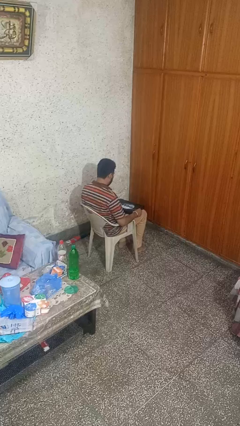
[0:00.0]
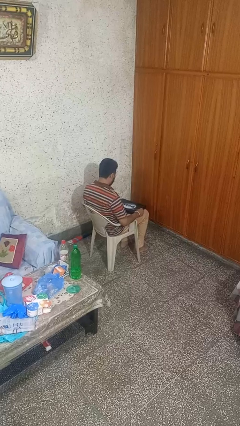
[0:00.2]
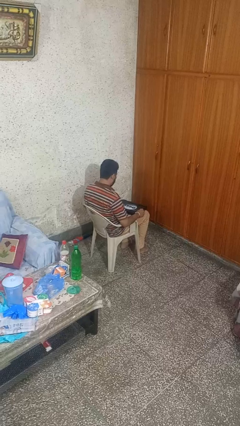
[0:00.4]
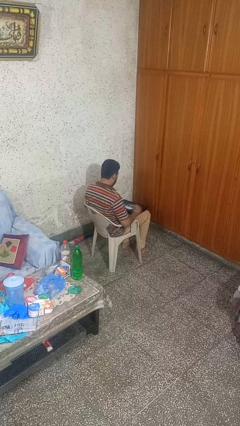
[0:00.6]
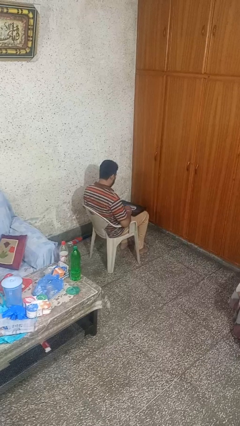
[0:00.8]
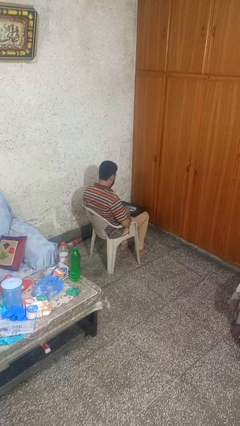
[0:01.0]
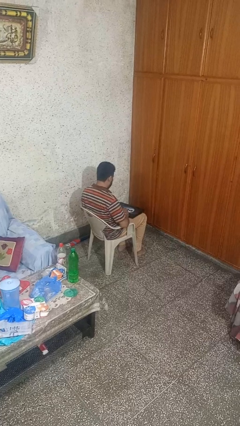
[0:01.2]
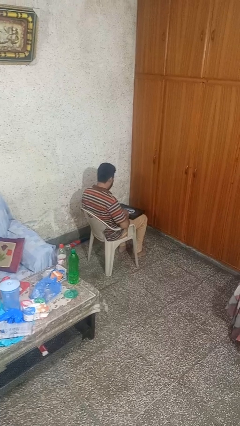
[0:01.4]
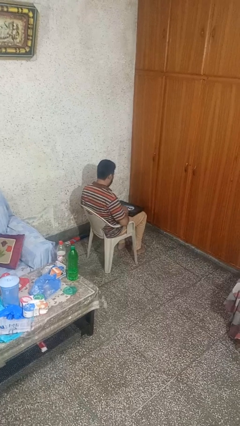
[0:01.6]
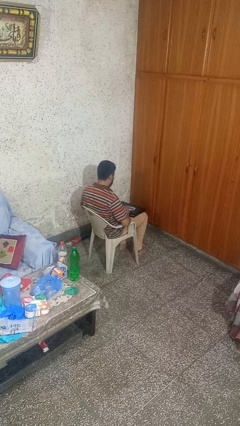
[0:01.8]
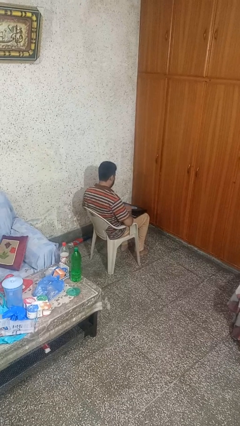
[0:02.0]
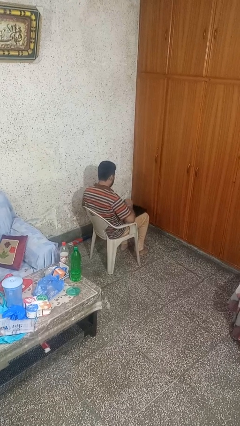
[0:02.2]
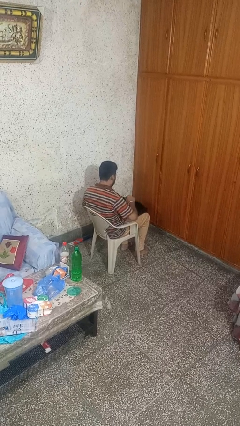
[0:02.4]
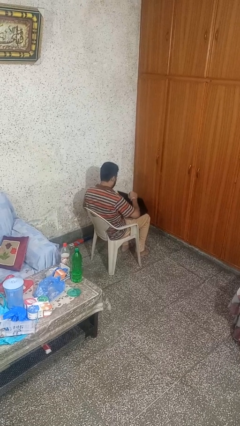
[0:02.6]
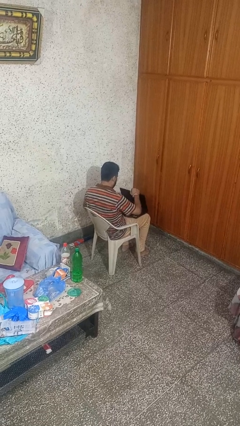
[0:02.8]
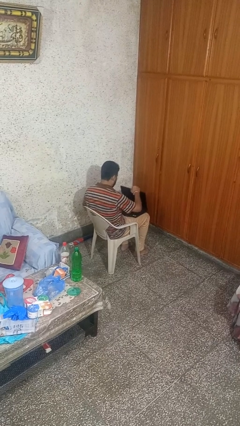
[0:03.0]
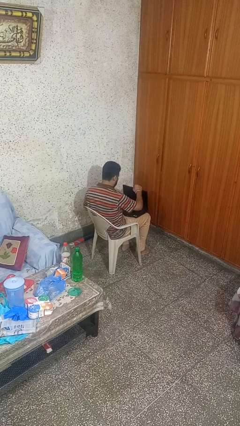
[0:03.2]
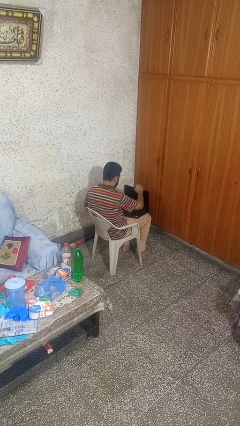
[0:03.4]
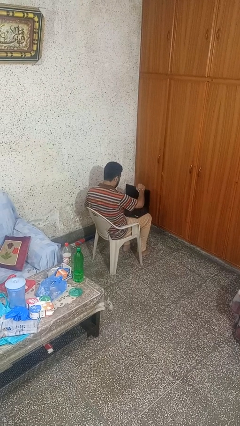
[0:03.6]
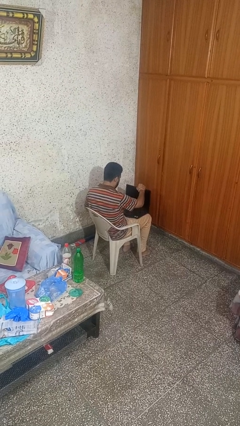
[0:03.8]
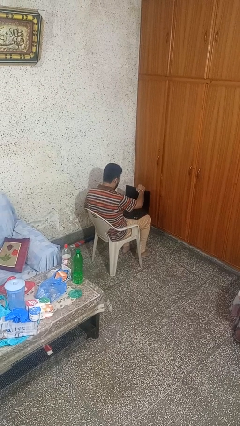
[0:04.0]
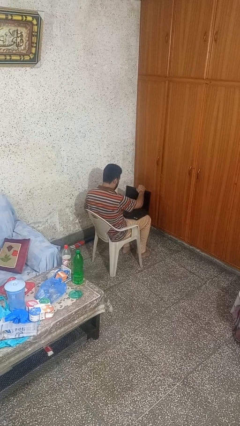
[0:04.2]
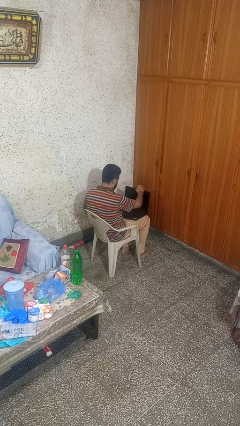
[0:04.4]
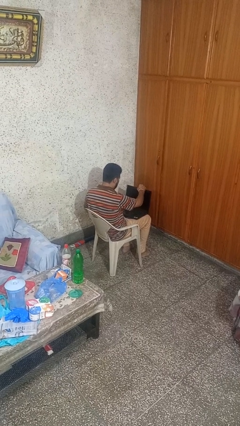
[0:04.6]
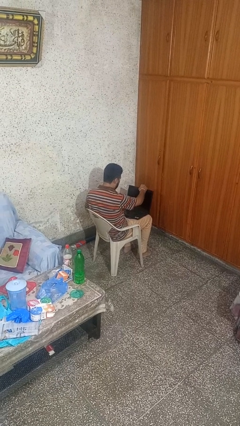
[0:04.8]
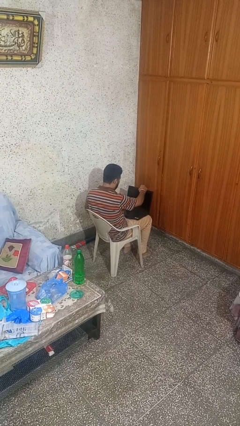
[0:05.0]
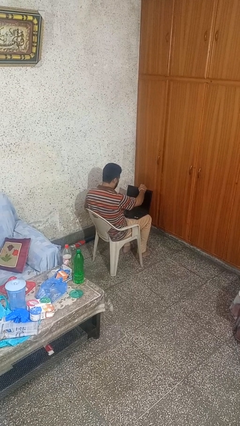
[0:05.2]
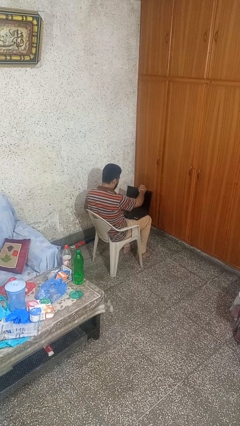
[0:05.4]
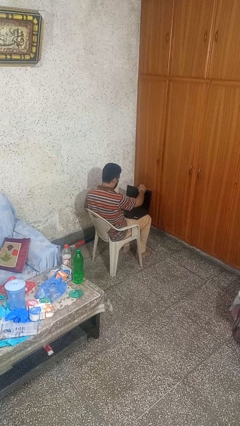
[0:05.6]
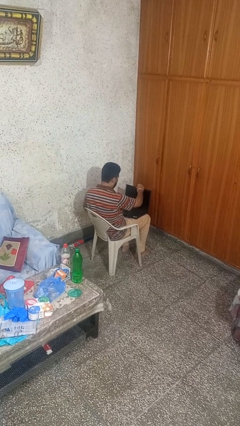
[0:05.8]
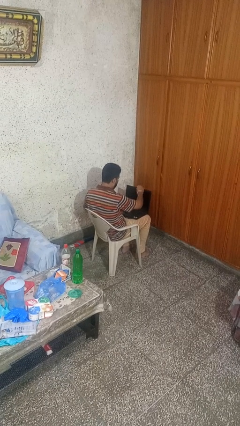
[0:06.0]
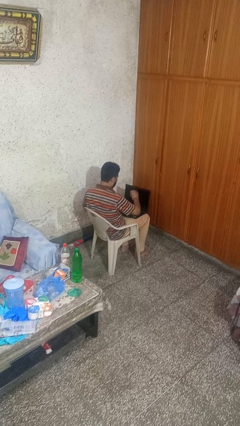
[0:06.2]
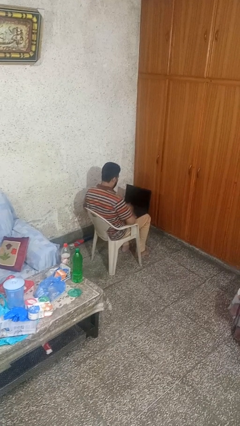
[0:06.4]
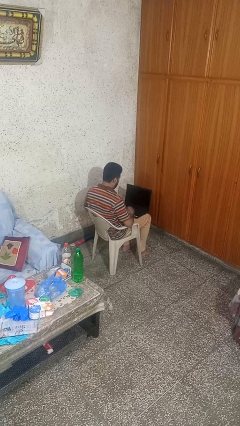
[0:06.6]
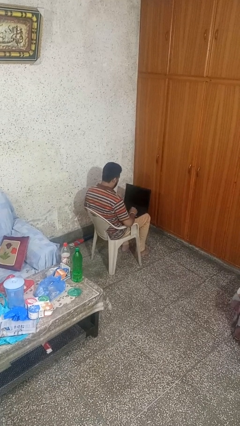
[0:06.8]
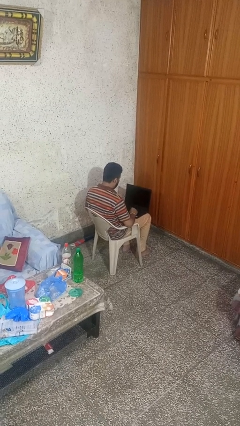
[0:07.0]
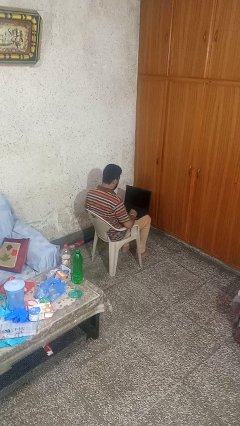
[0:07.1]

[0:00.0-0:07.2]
person opens laptop

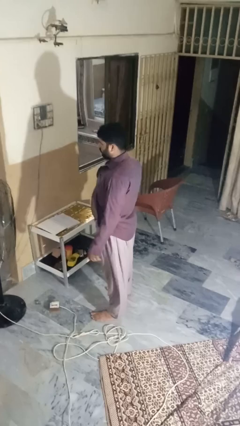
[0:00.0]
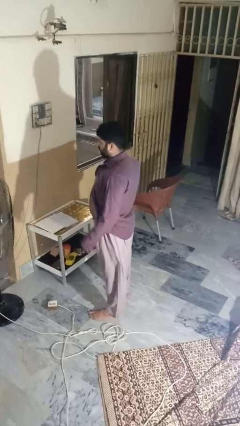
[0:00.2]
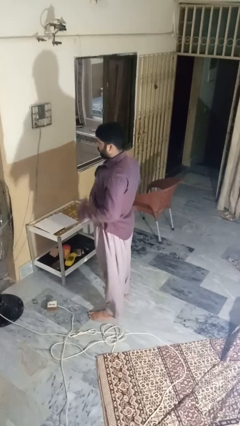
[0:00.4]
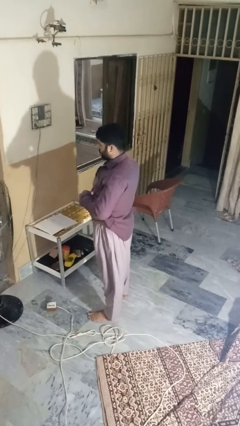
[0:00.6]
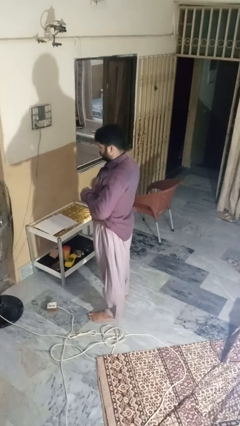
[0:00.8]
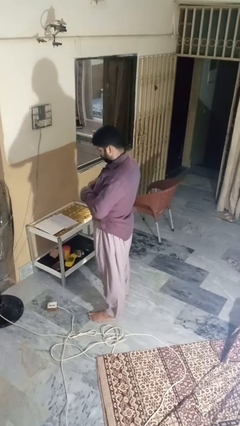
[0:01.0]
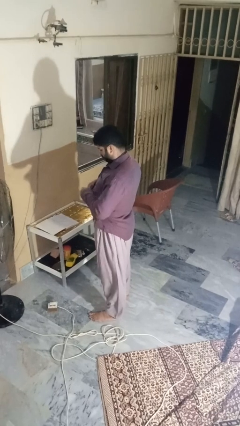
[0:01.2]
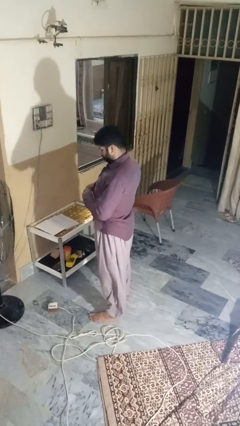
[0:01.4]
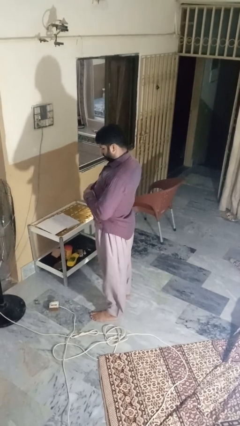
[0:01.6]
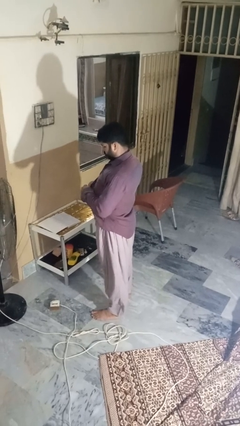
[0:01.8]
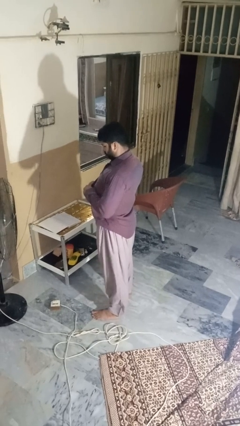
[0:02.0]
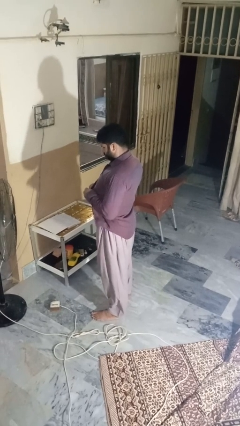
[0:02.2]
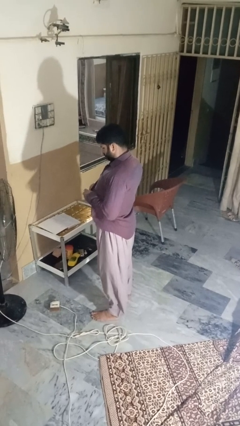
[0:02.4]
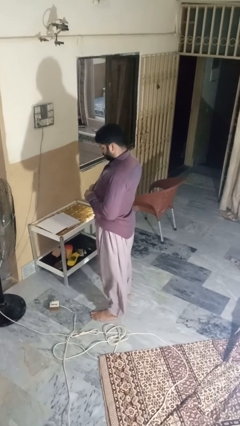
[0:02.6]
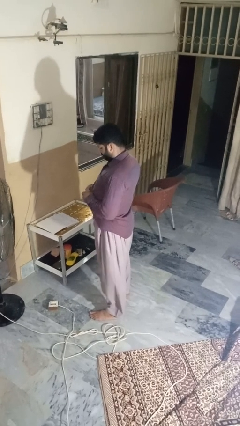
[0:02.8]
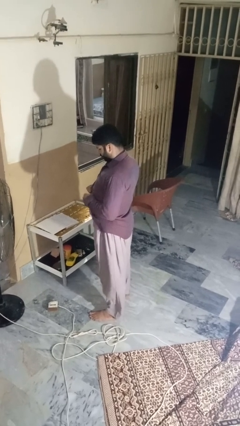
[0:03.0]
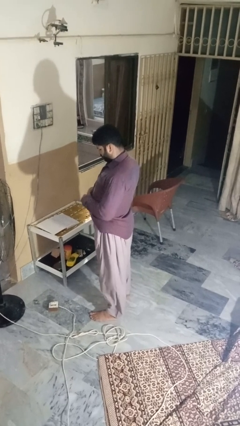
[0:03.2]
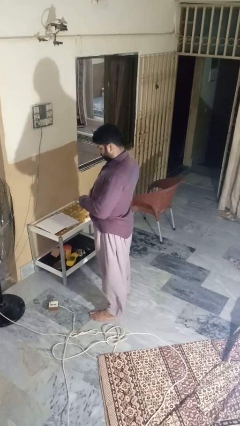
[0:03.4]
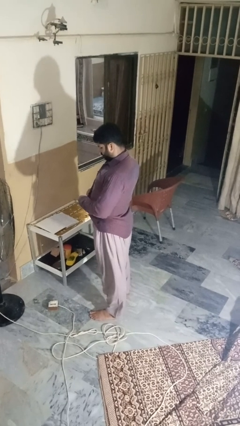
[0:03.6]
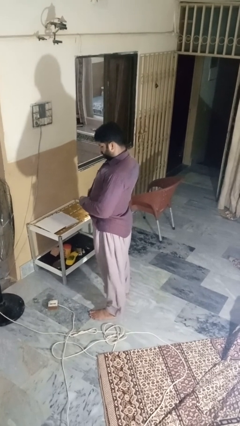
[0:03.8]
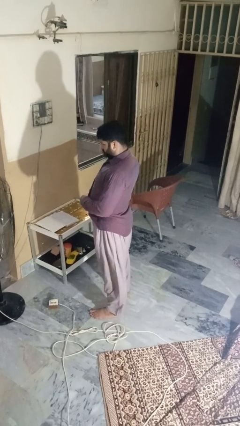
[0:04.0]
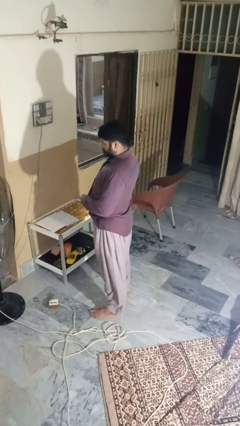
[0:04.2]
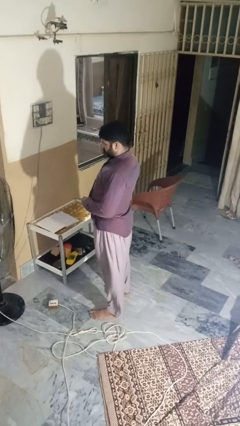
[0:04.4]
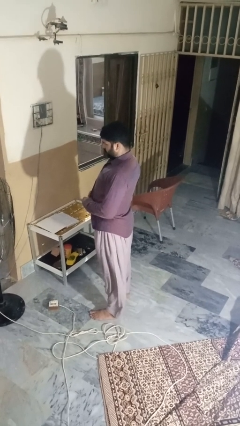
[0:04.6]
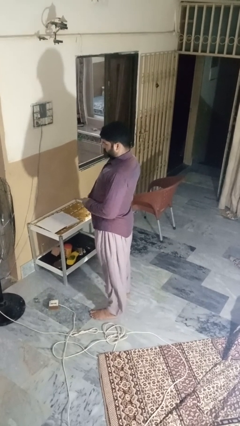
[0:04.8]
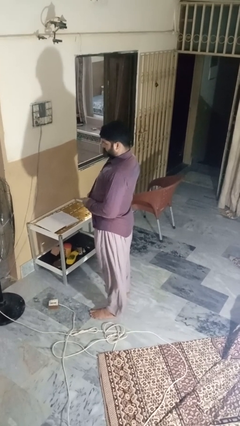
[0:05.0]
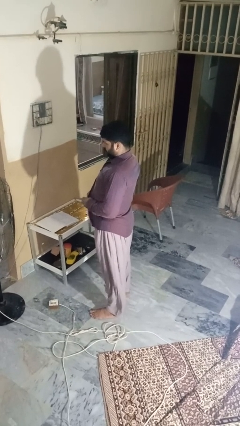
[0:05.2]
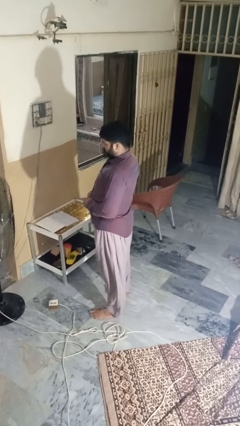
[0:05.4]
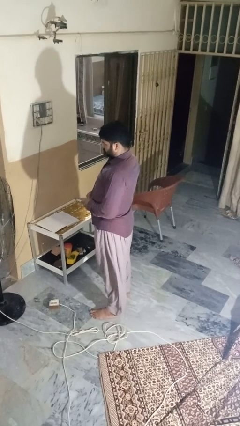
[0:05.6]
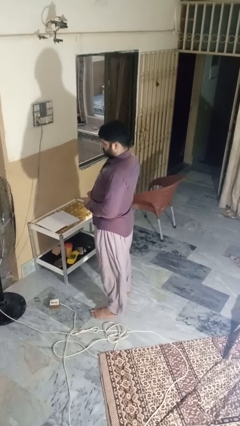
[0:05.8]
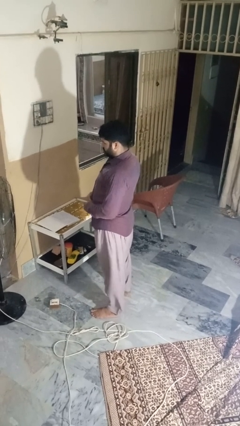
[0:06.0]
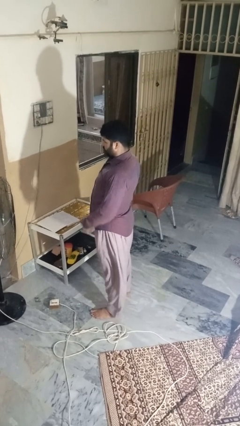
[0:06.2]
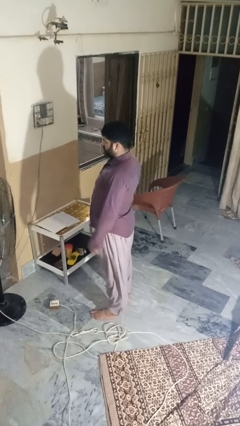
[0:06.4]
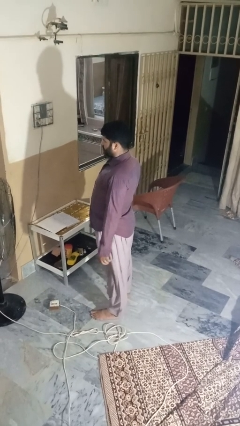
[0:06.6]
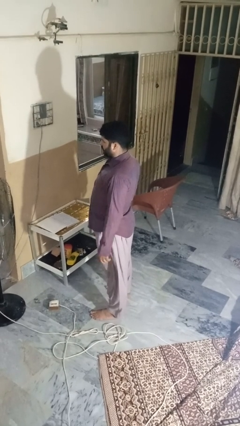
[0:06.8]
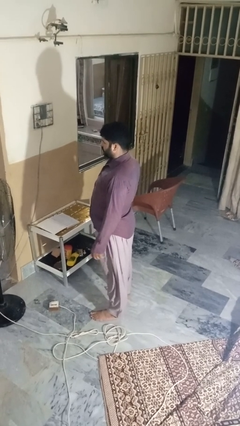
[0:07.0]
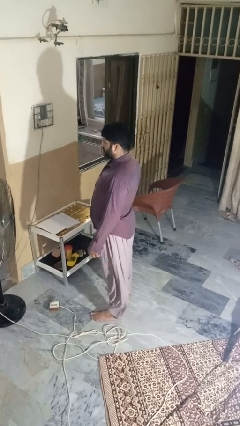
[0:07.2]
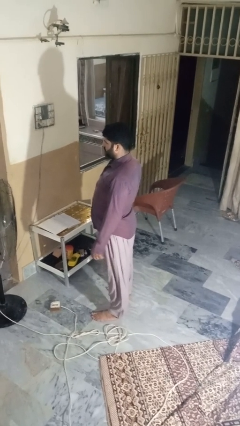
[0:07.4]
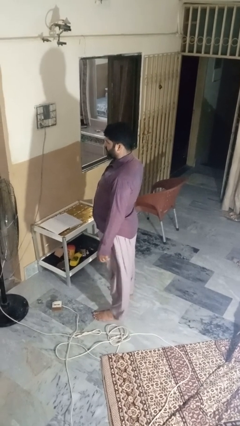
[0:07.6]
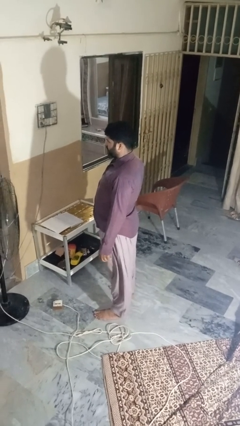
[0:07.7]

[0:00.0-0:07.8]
person buttons shirt

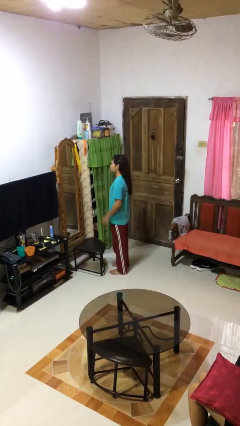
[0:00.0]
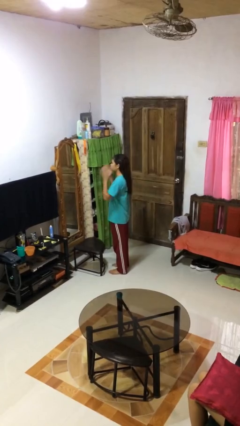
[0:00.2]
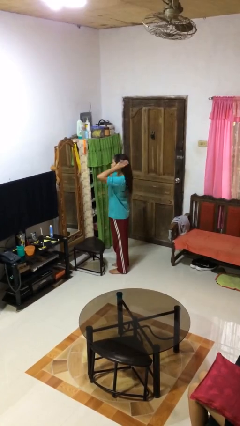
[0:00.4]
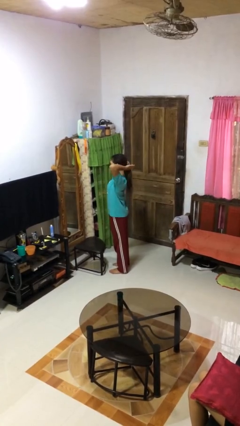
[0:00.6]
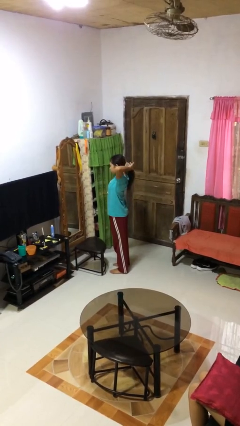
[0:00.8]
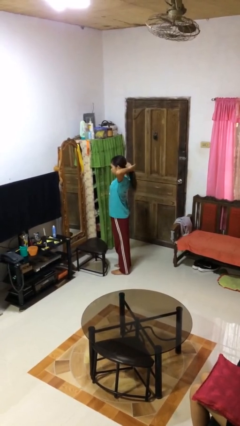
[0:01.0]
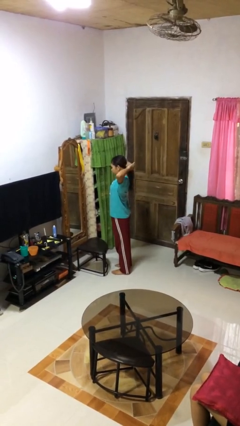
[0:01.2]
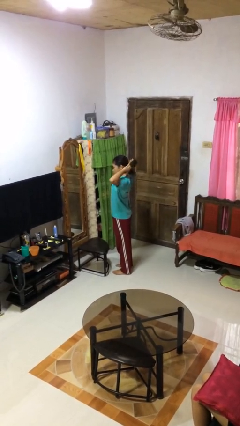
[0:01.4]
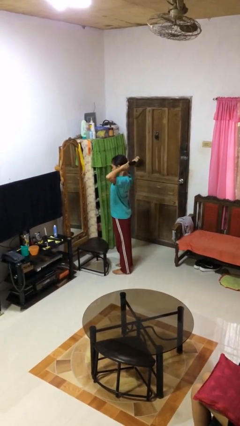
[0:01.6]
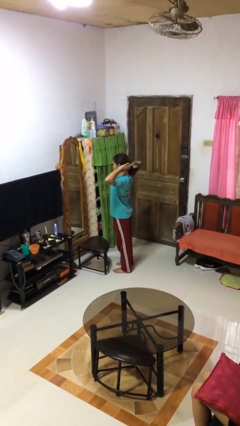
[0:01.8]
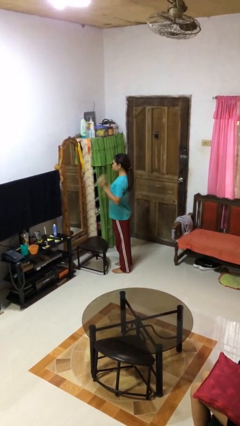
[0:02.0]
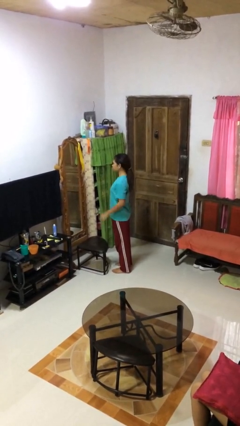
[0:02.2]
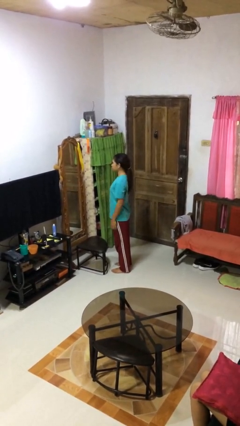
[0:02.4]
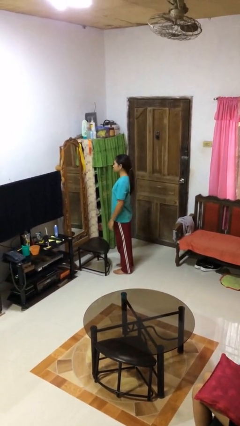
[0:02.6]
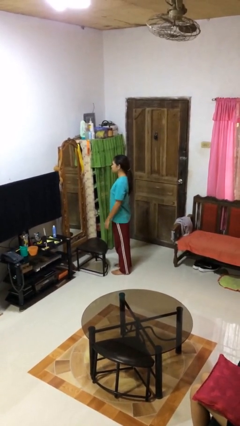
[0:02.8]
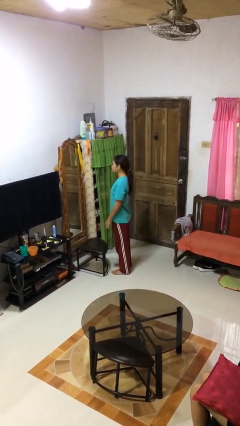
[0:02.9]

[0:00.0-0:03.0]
person puts hair in ponytail
